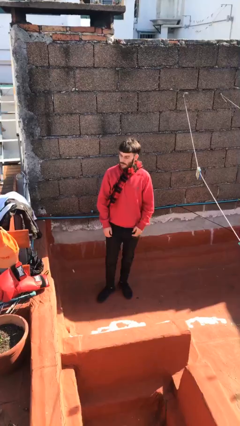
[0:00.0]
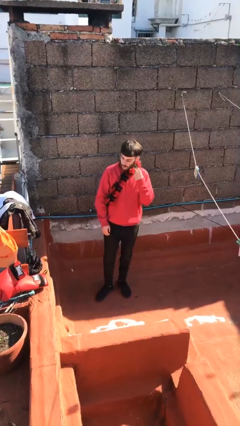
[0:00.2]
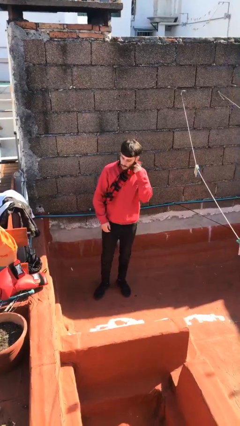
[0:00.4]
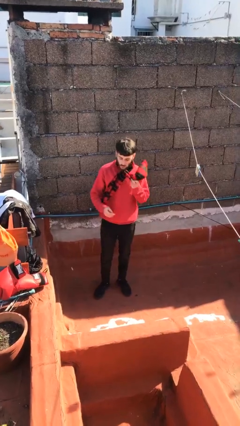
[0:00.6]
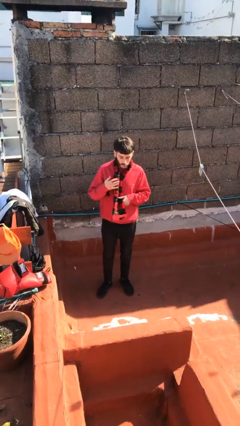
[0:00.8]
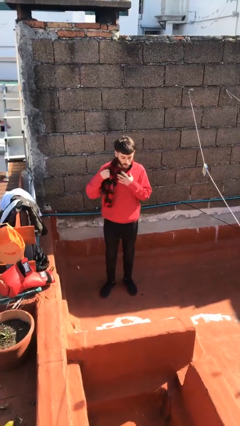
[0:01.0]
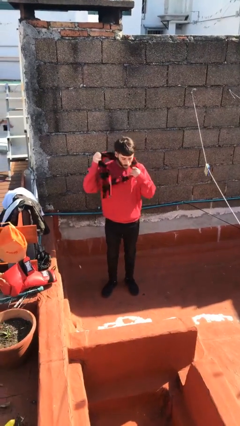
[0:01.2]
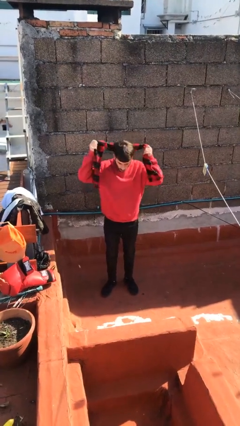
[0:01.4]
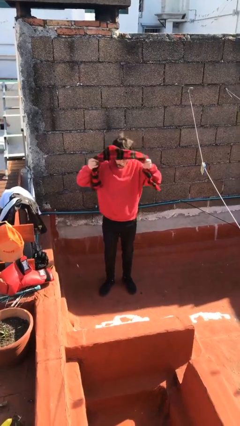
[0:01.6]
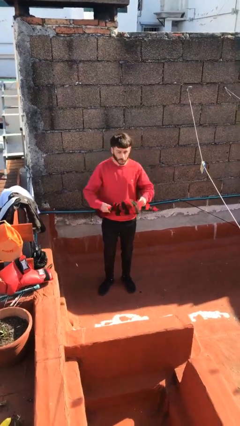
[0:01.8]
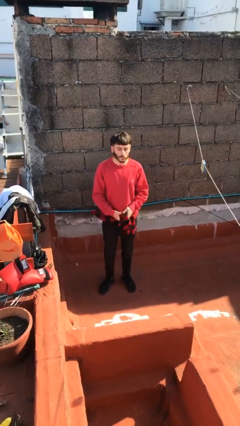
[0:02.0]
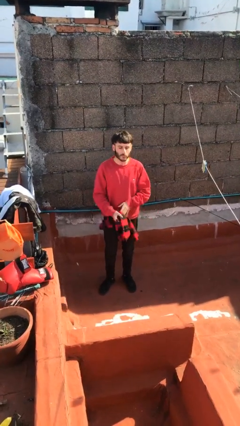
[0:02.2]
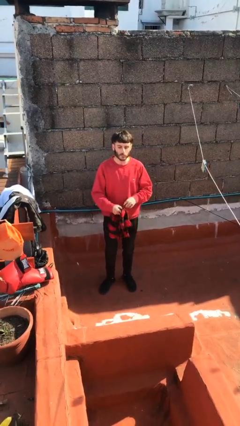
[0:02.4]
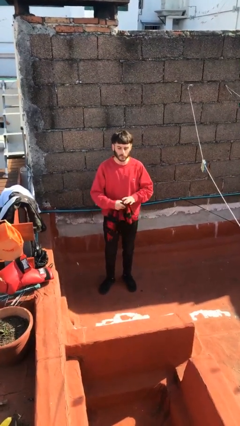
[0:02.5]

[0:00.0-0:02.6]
person takes off scarf

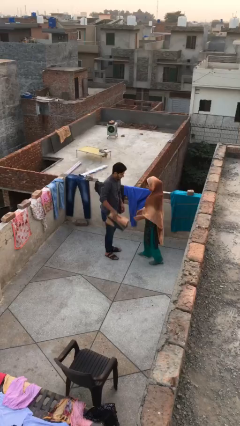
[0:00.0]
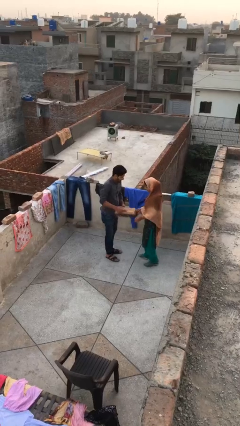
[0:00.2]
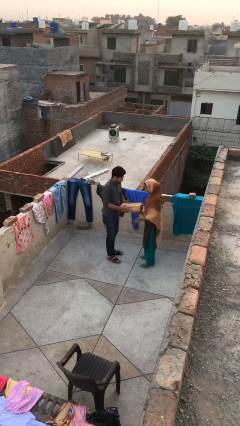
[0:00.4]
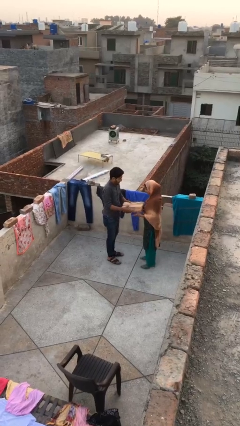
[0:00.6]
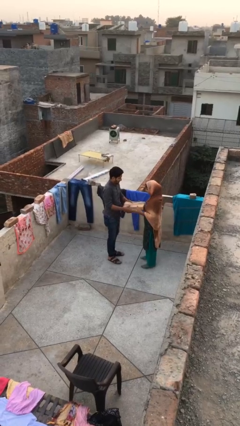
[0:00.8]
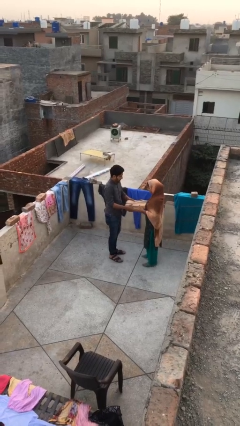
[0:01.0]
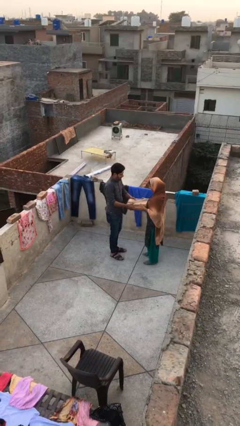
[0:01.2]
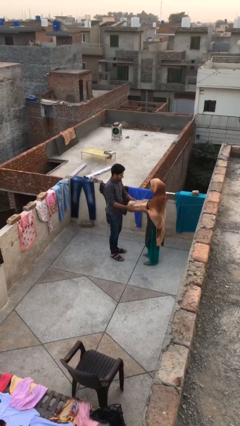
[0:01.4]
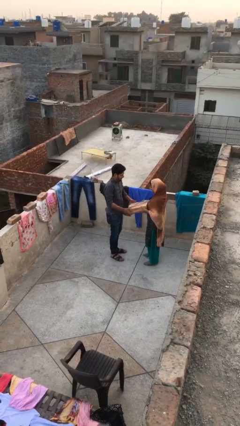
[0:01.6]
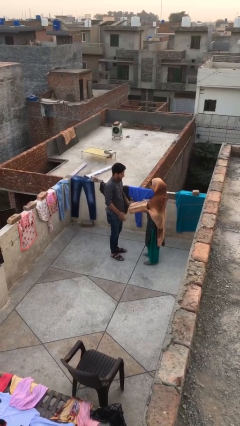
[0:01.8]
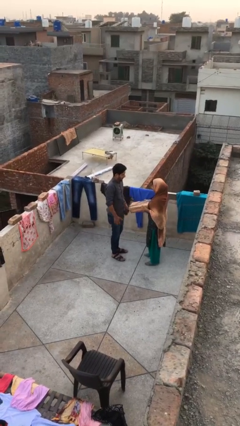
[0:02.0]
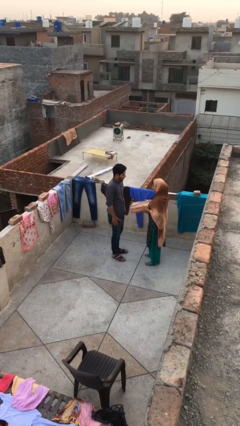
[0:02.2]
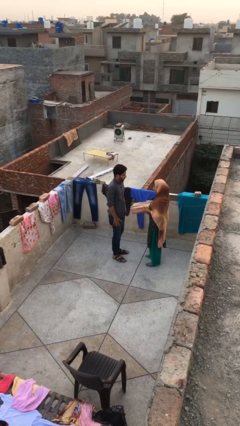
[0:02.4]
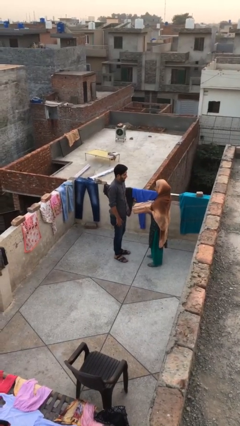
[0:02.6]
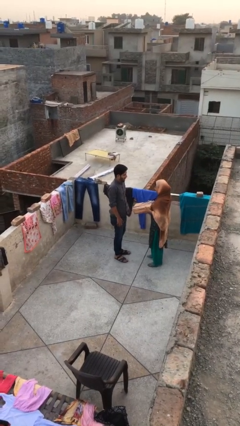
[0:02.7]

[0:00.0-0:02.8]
person transfers object to person

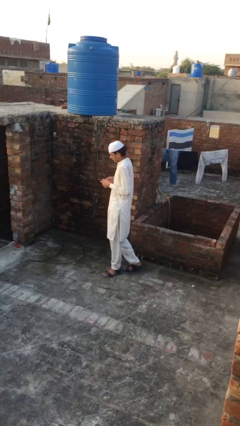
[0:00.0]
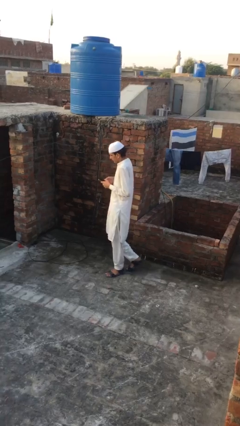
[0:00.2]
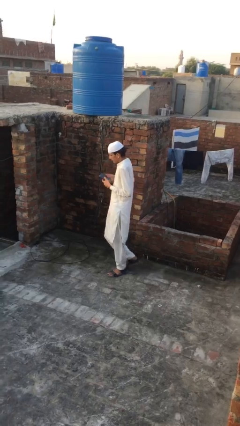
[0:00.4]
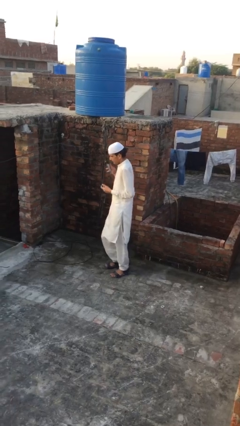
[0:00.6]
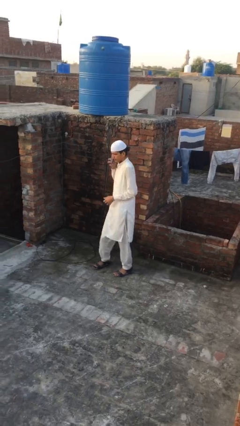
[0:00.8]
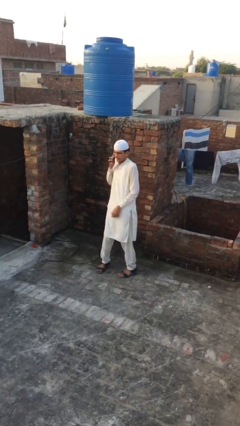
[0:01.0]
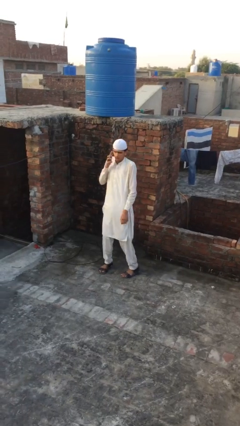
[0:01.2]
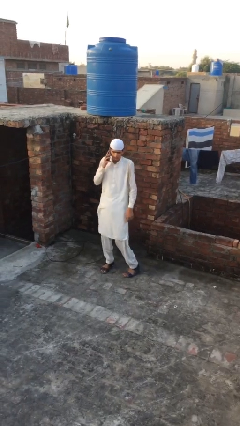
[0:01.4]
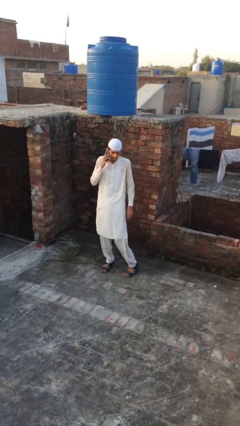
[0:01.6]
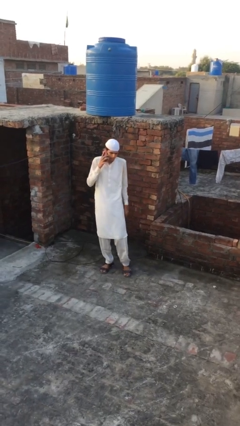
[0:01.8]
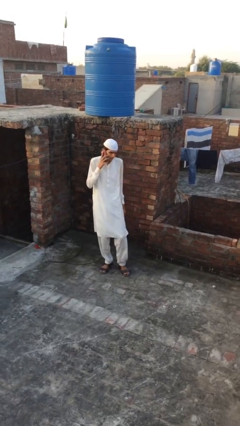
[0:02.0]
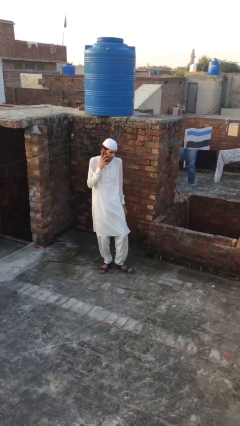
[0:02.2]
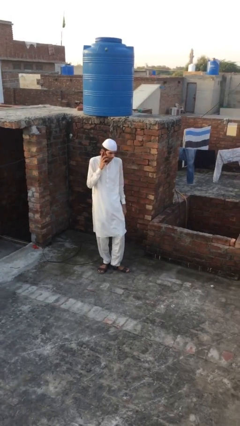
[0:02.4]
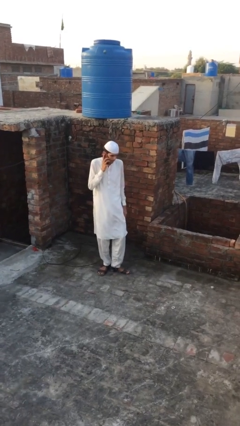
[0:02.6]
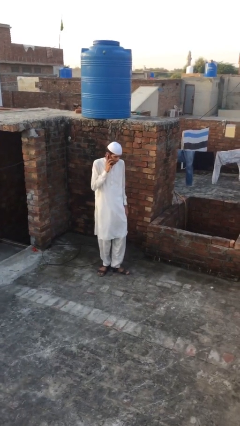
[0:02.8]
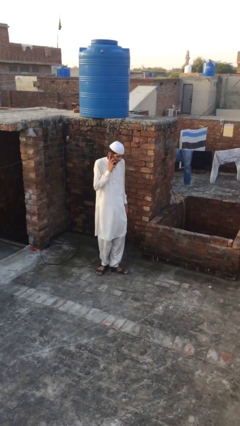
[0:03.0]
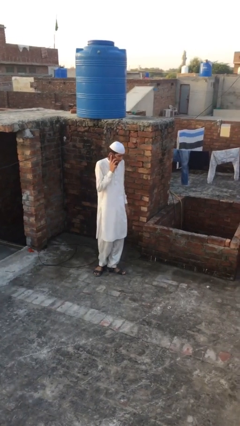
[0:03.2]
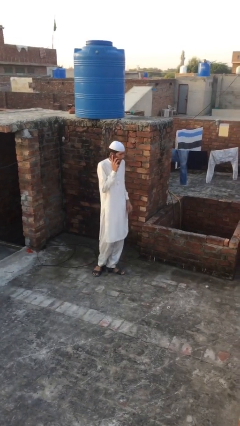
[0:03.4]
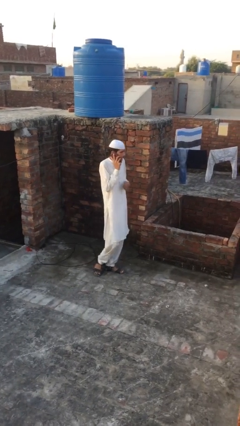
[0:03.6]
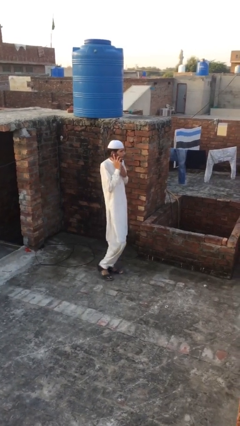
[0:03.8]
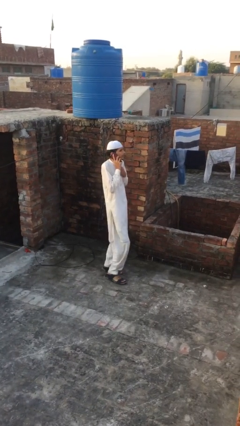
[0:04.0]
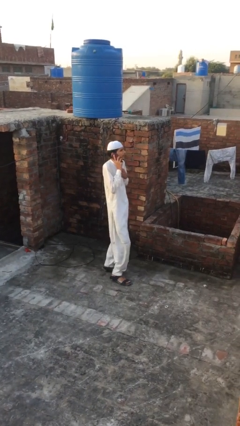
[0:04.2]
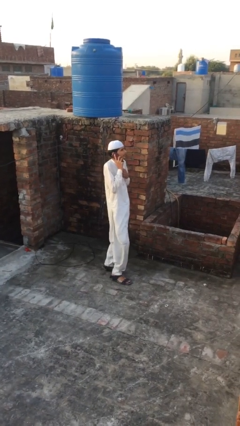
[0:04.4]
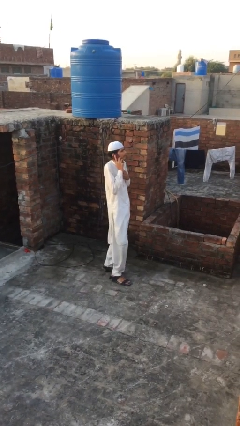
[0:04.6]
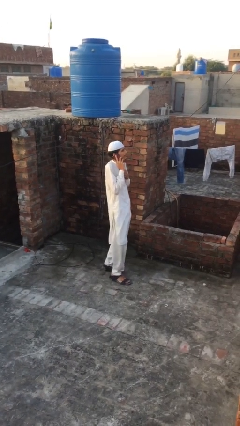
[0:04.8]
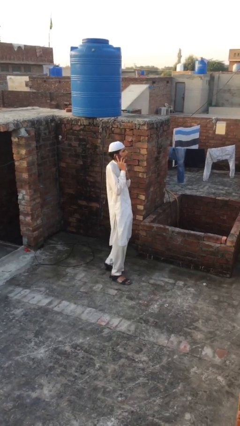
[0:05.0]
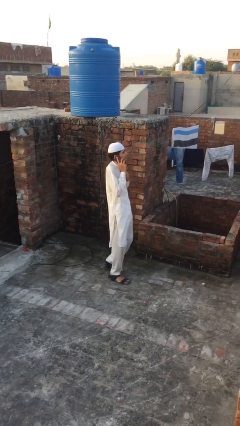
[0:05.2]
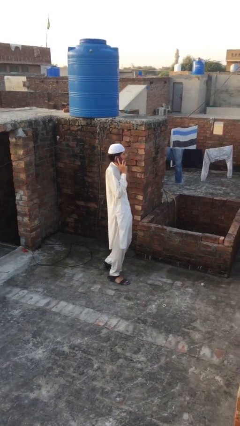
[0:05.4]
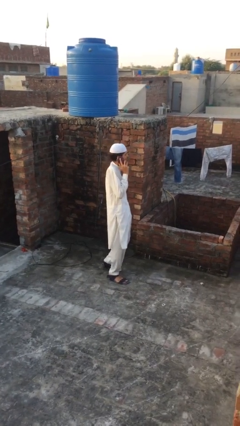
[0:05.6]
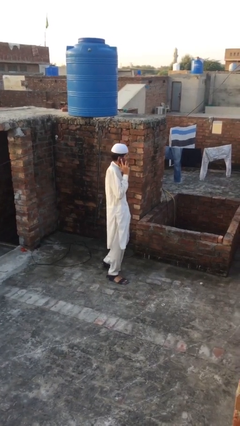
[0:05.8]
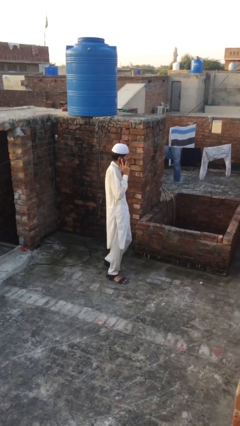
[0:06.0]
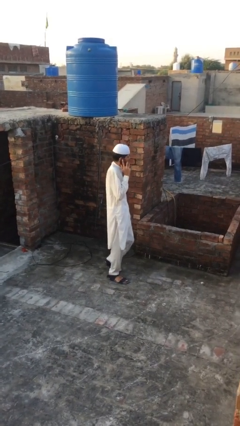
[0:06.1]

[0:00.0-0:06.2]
person talks on phone

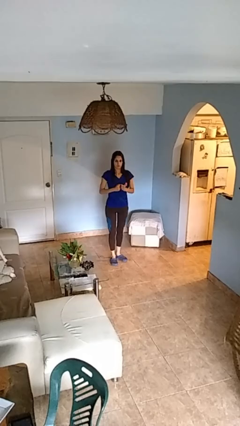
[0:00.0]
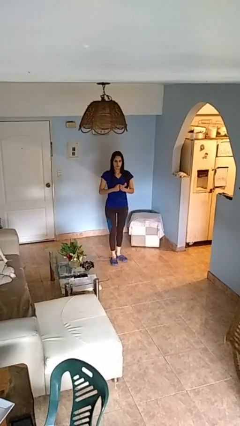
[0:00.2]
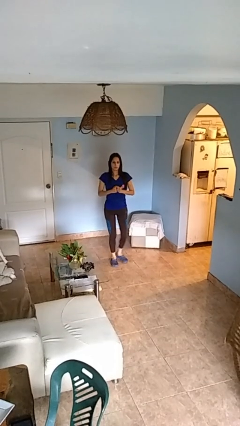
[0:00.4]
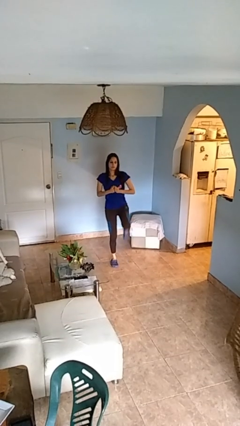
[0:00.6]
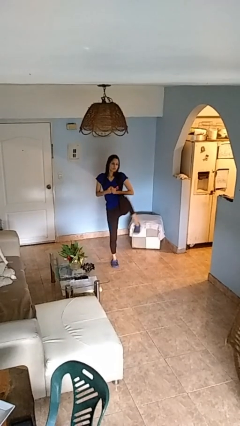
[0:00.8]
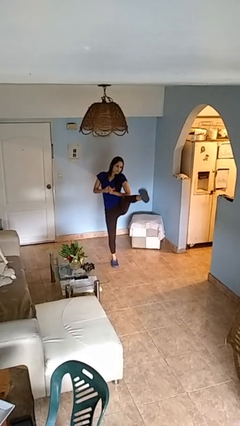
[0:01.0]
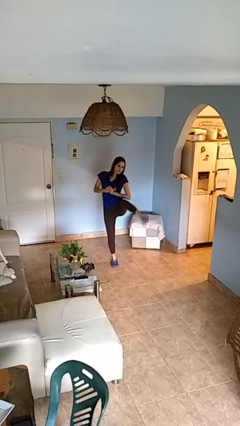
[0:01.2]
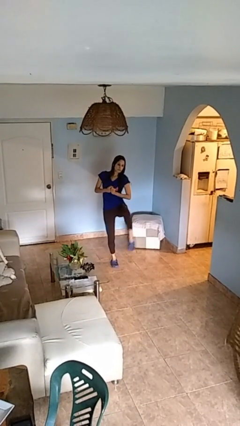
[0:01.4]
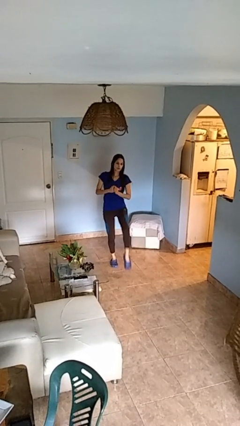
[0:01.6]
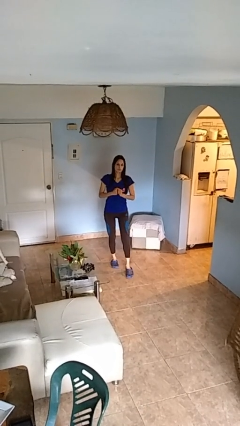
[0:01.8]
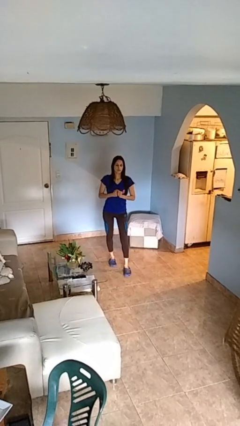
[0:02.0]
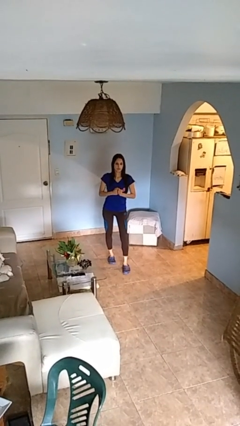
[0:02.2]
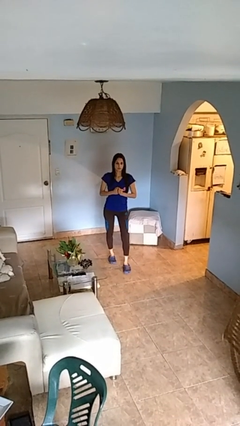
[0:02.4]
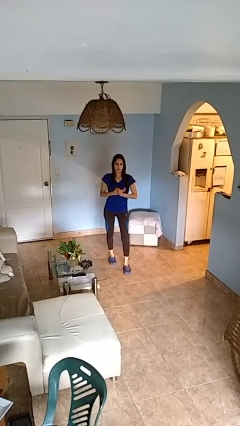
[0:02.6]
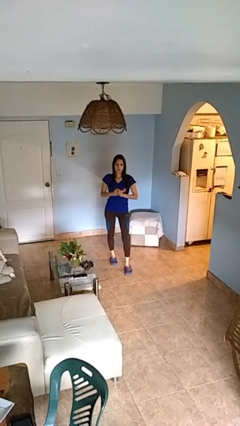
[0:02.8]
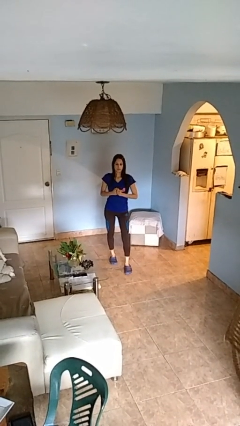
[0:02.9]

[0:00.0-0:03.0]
person karate kicks

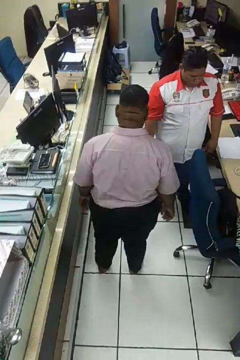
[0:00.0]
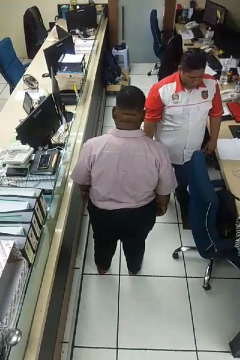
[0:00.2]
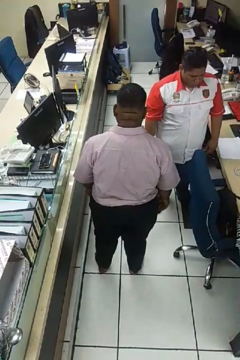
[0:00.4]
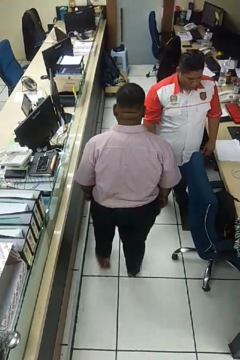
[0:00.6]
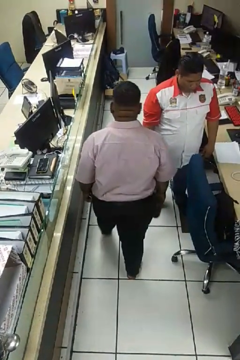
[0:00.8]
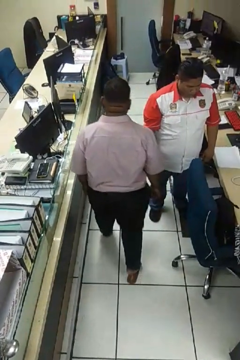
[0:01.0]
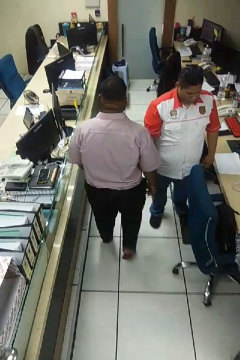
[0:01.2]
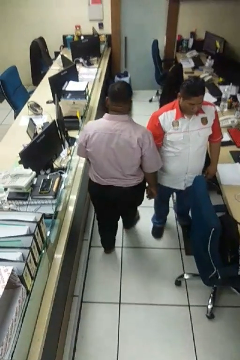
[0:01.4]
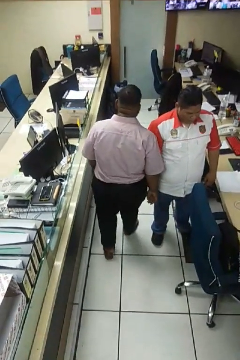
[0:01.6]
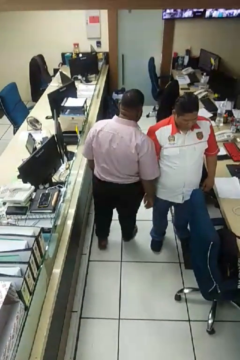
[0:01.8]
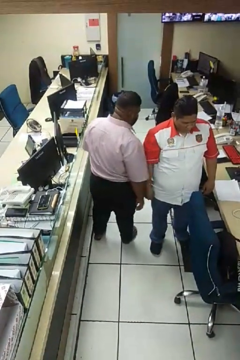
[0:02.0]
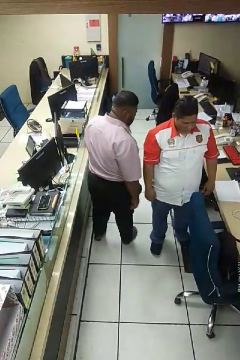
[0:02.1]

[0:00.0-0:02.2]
person bumps into person

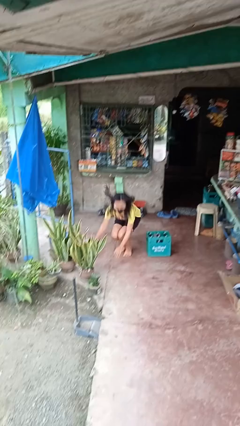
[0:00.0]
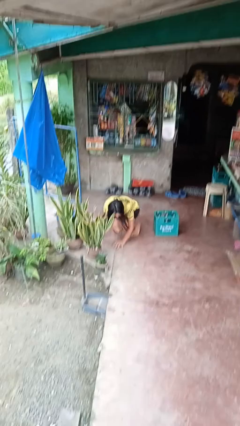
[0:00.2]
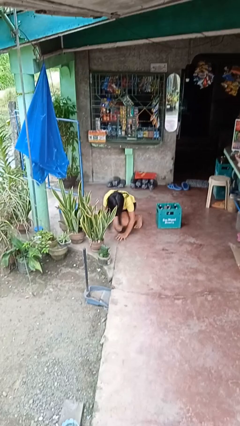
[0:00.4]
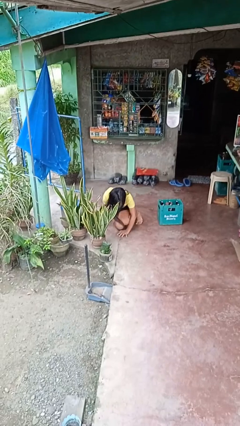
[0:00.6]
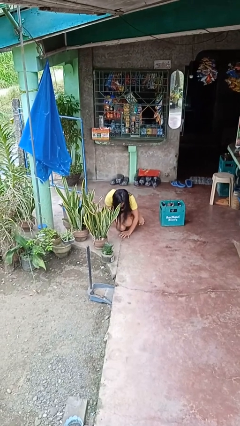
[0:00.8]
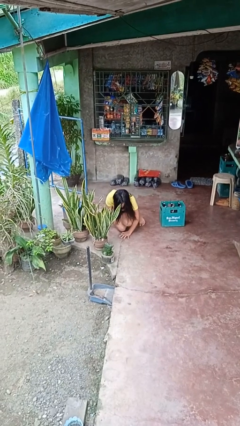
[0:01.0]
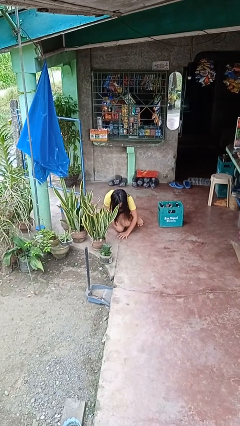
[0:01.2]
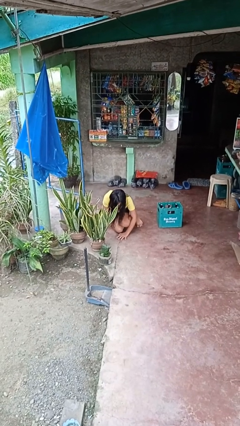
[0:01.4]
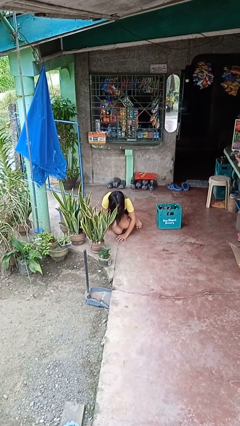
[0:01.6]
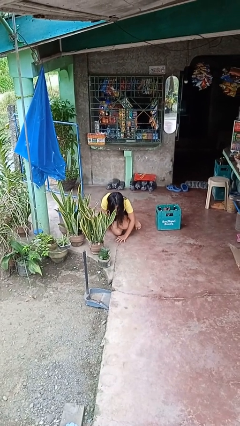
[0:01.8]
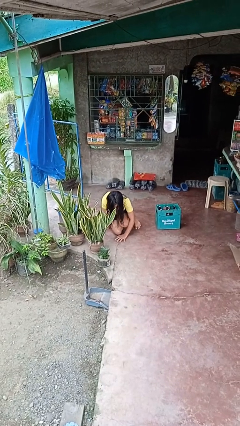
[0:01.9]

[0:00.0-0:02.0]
person lies down on floor
